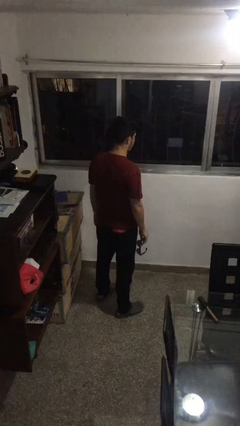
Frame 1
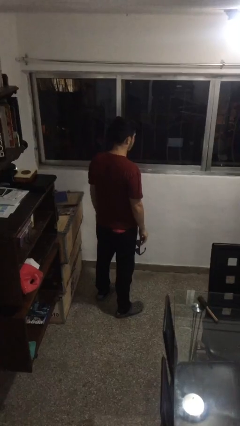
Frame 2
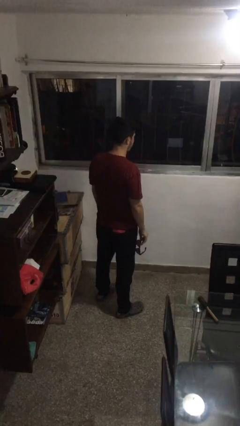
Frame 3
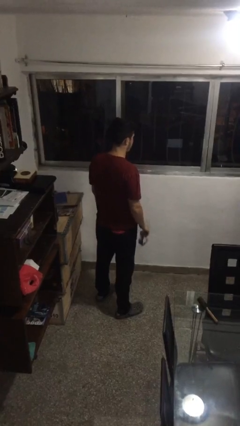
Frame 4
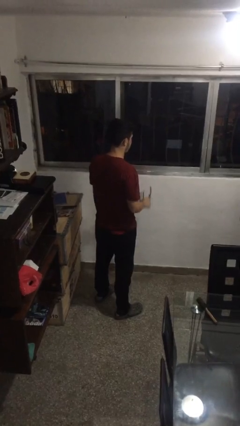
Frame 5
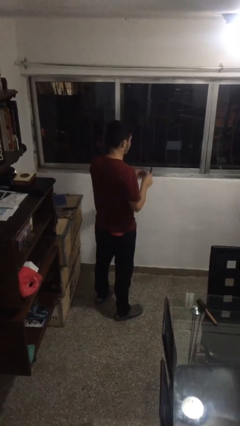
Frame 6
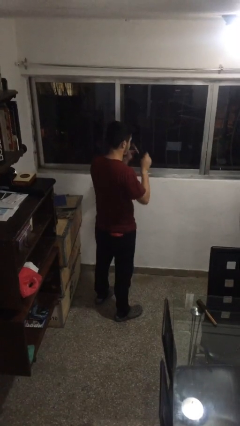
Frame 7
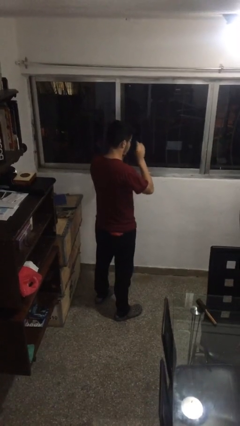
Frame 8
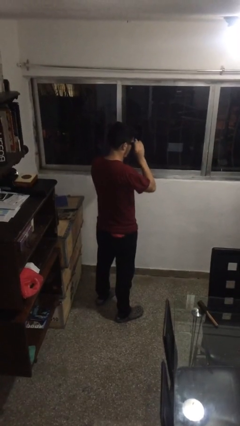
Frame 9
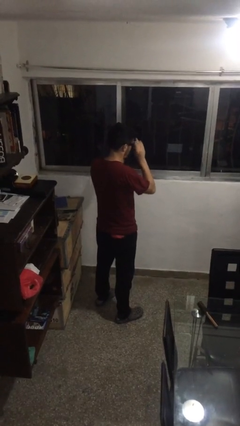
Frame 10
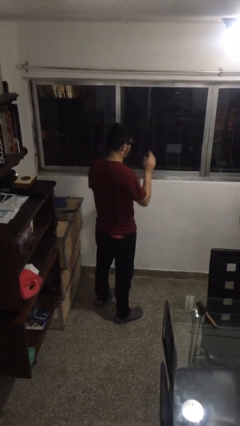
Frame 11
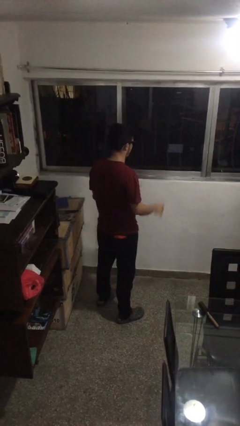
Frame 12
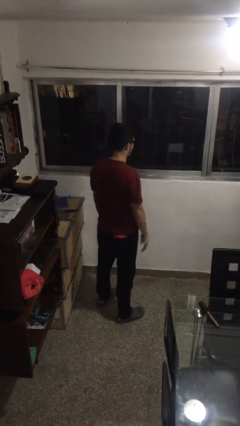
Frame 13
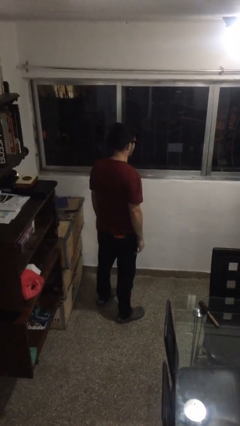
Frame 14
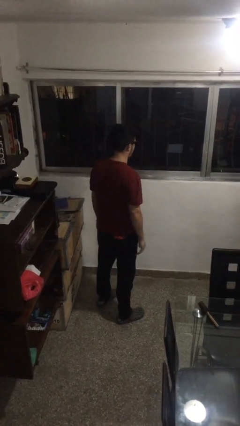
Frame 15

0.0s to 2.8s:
person puts on sunglasses

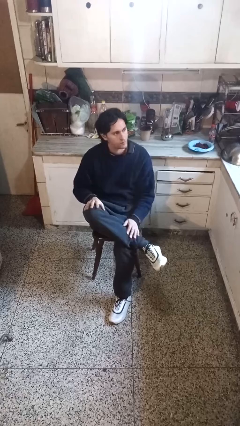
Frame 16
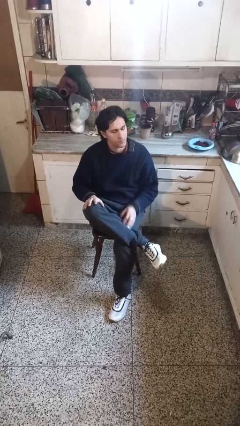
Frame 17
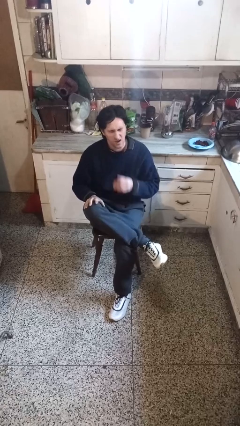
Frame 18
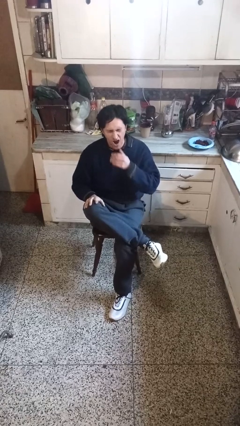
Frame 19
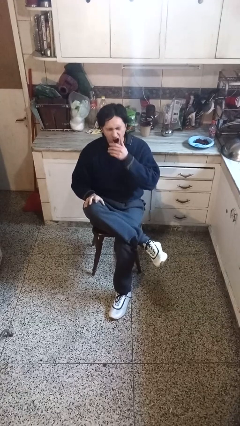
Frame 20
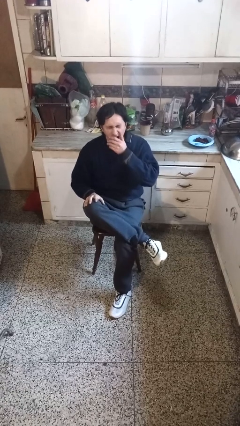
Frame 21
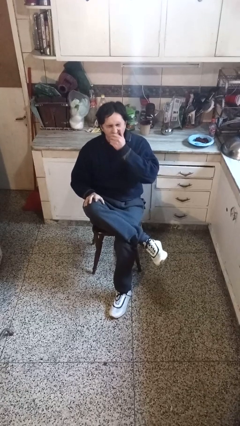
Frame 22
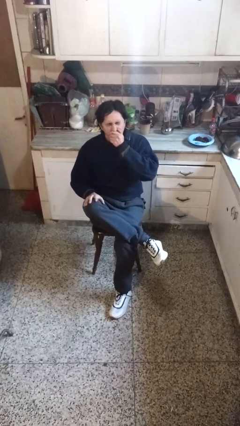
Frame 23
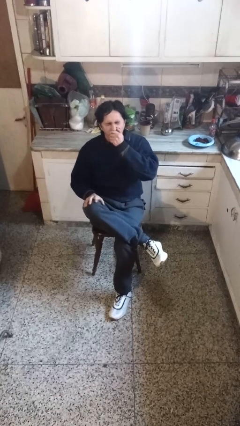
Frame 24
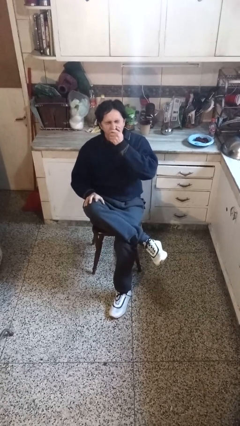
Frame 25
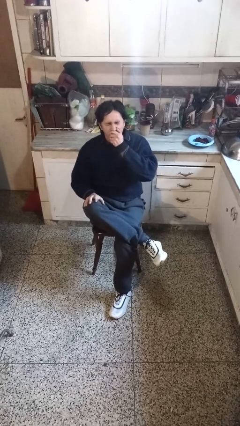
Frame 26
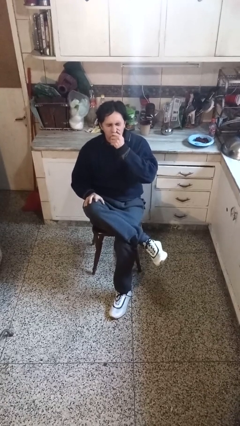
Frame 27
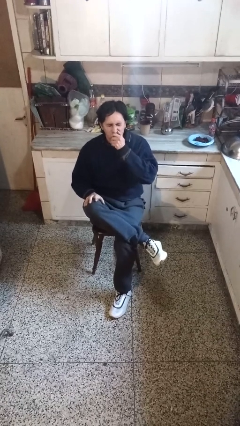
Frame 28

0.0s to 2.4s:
person yawns

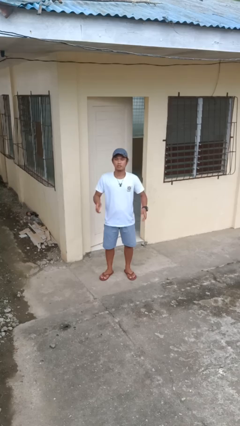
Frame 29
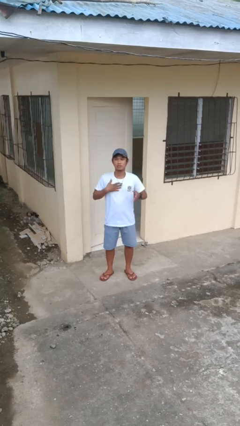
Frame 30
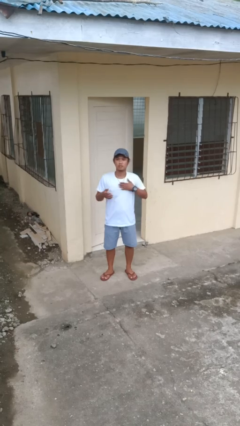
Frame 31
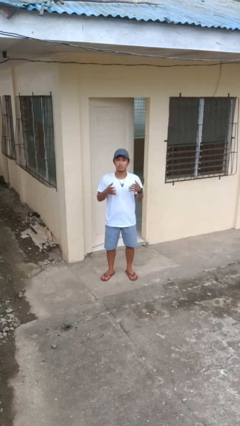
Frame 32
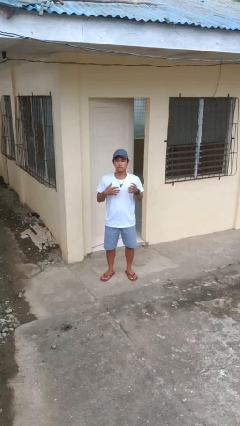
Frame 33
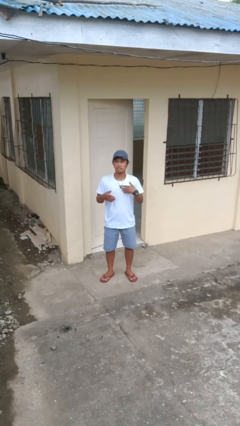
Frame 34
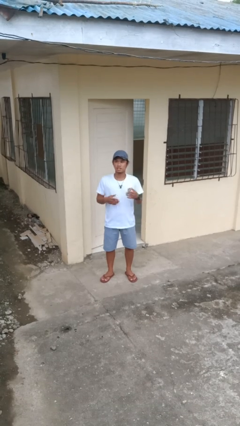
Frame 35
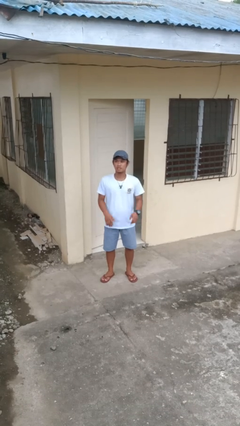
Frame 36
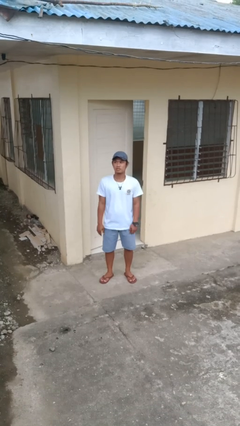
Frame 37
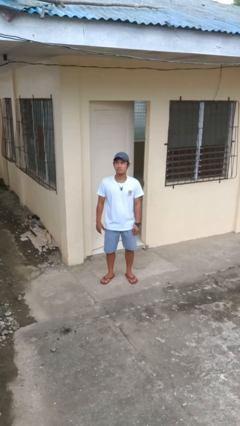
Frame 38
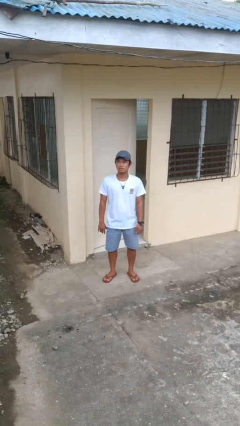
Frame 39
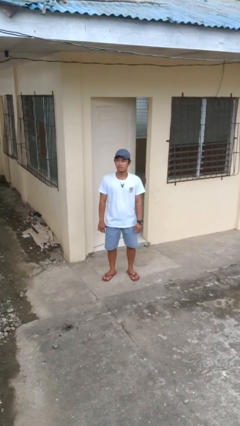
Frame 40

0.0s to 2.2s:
person drums on chest

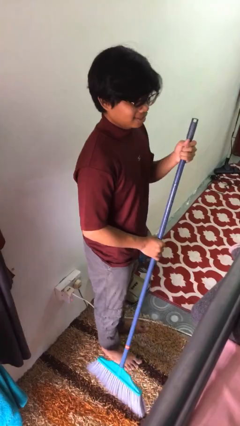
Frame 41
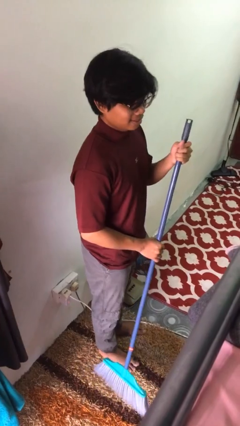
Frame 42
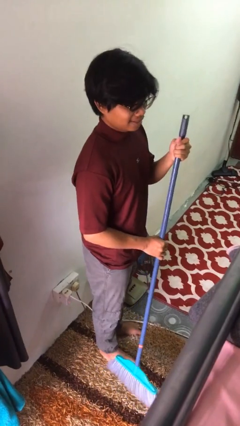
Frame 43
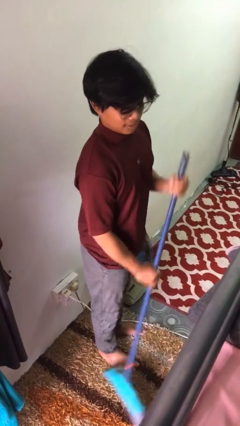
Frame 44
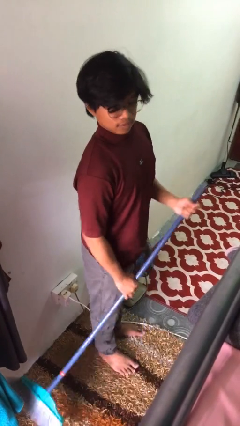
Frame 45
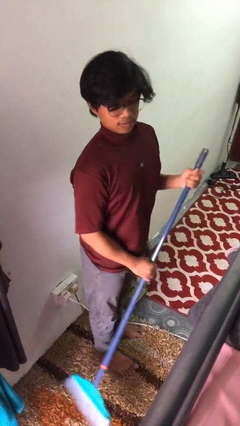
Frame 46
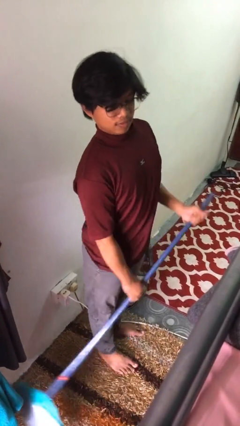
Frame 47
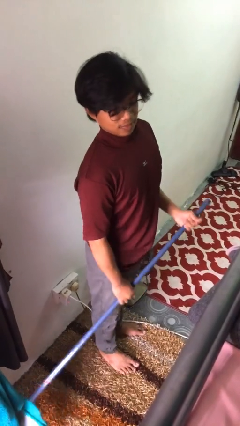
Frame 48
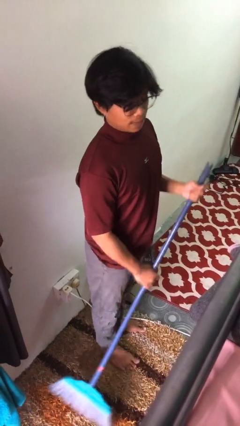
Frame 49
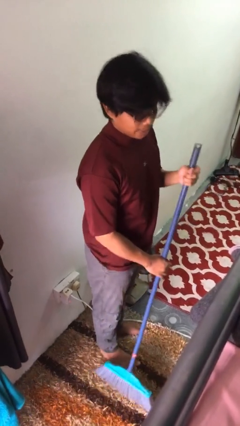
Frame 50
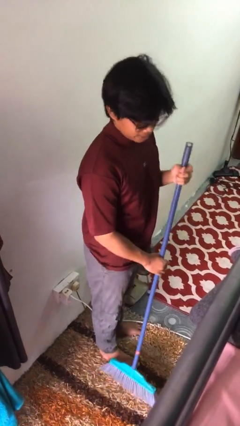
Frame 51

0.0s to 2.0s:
person sweeps floor

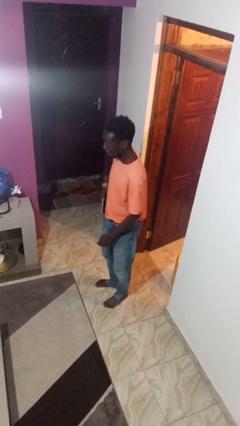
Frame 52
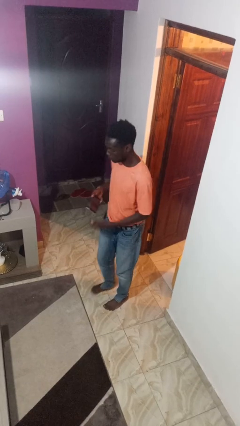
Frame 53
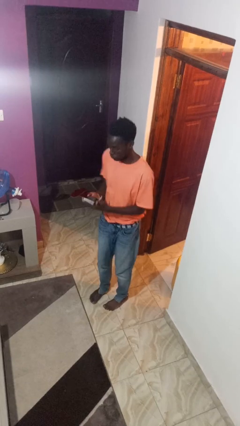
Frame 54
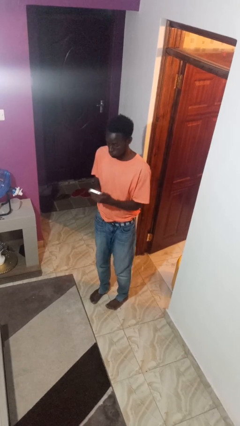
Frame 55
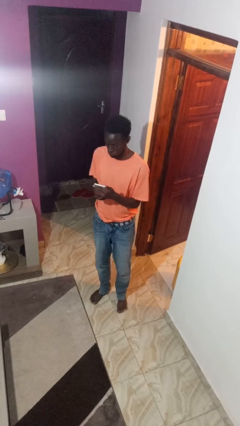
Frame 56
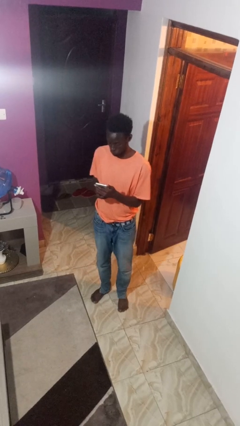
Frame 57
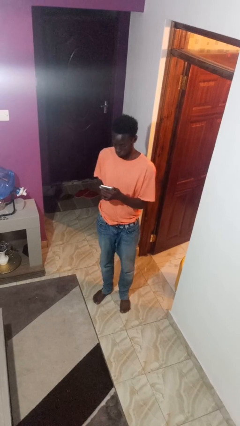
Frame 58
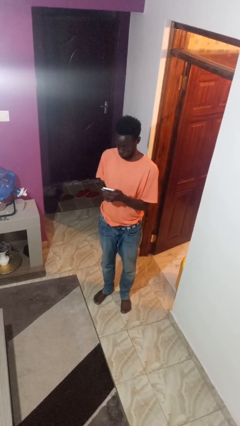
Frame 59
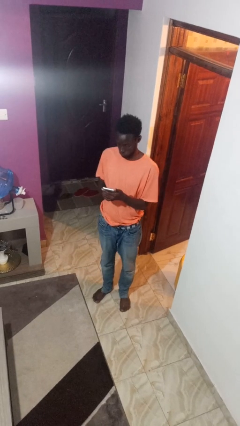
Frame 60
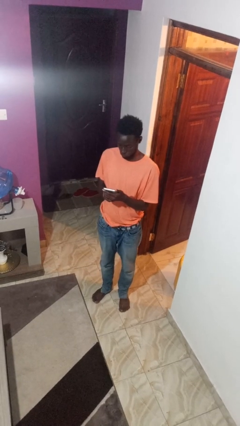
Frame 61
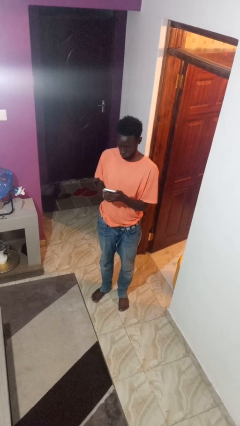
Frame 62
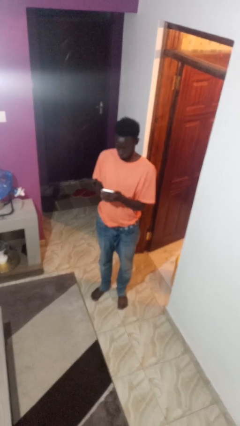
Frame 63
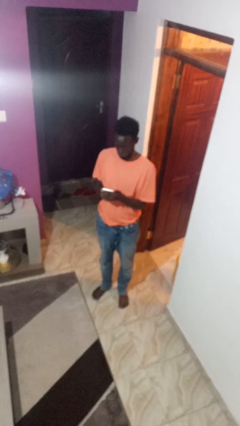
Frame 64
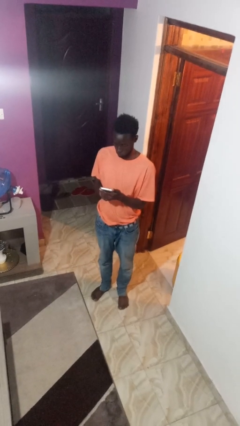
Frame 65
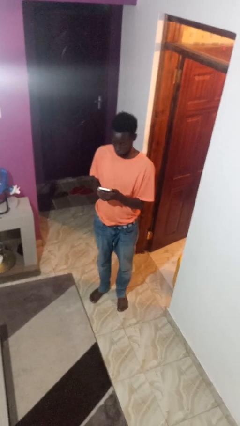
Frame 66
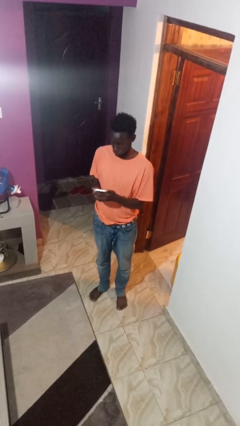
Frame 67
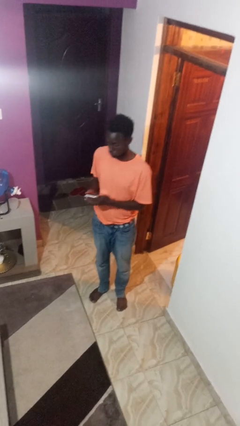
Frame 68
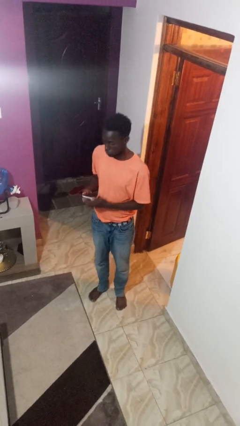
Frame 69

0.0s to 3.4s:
person takes phone from pocket

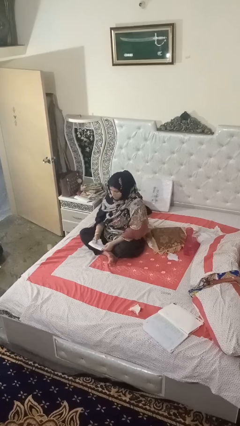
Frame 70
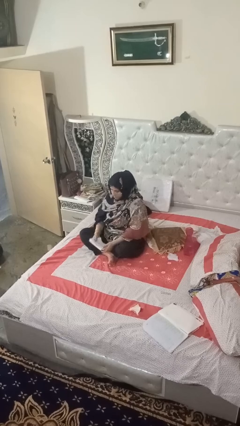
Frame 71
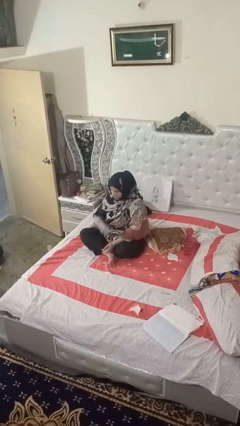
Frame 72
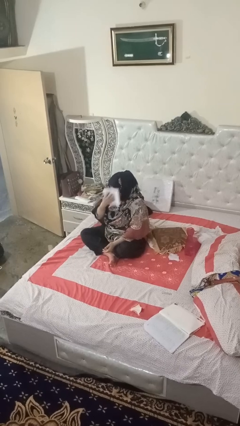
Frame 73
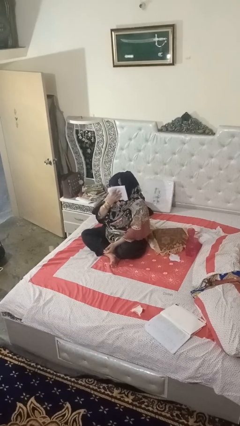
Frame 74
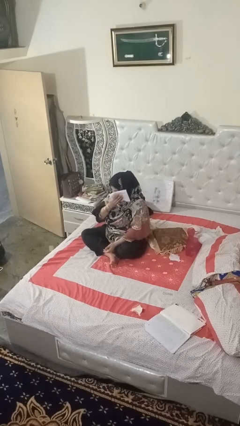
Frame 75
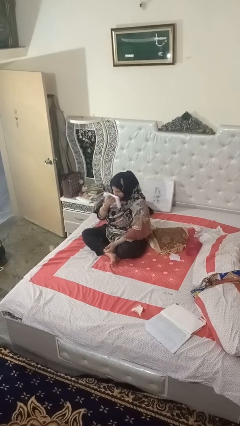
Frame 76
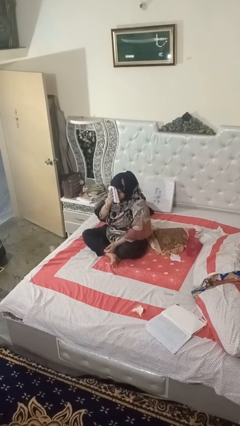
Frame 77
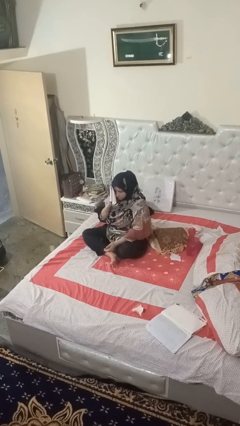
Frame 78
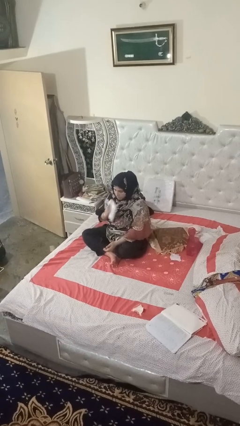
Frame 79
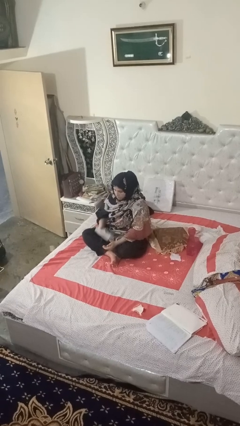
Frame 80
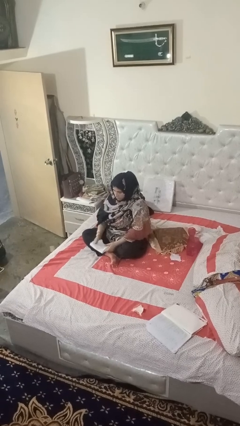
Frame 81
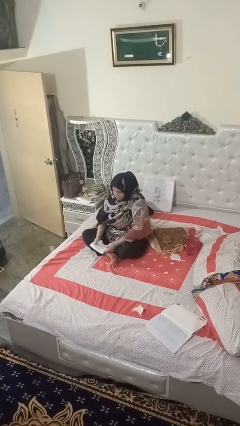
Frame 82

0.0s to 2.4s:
person wipes mouth with napkin

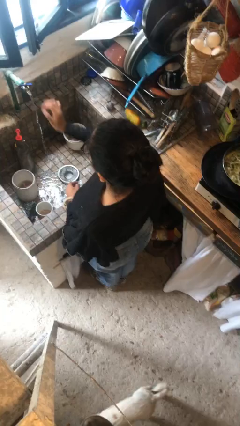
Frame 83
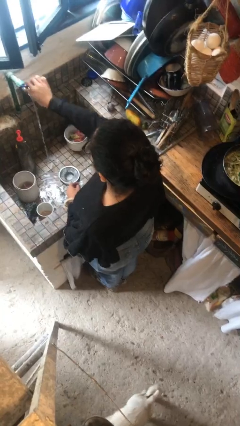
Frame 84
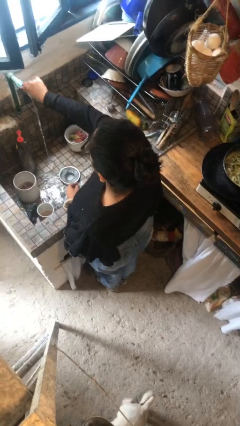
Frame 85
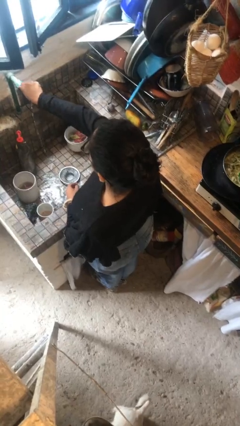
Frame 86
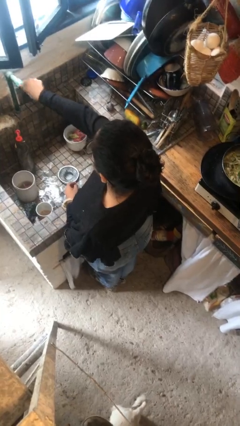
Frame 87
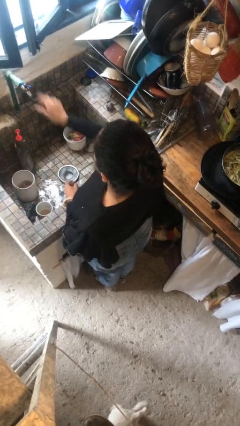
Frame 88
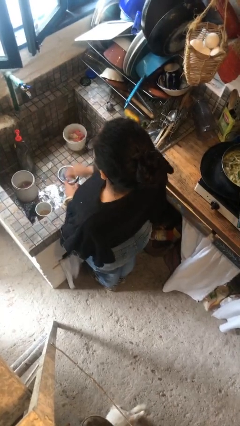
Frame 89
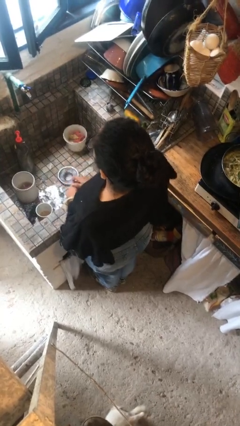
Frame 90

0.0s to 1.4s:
person turns off faucet
